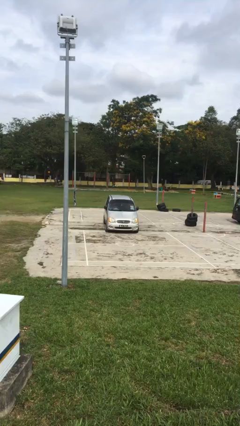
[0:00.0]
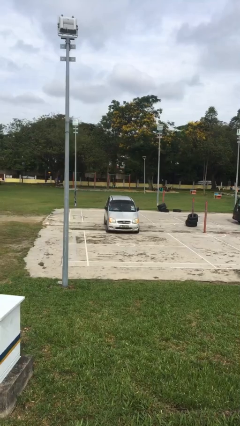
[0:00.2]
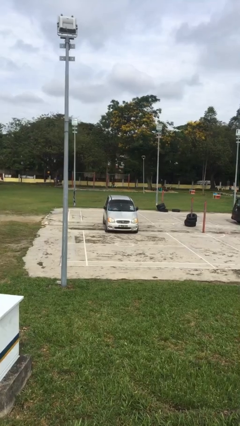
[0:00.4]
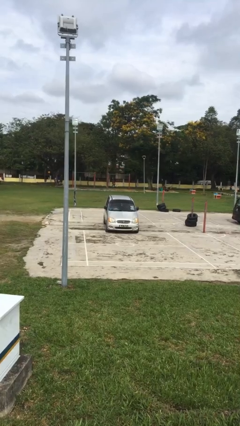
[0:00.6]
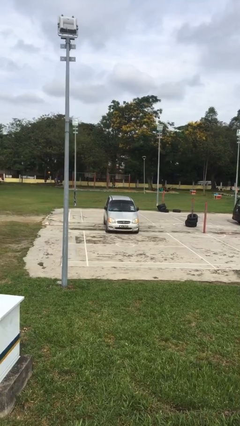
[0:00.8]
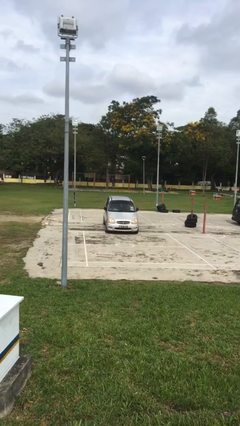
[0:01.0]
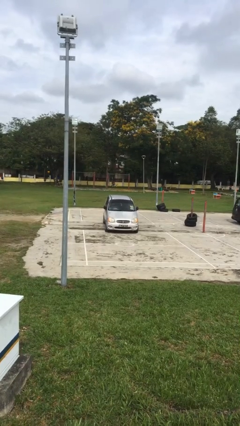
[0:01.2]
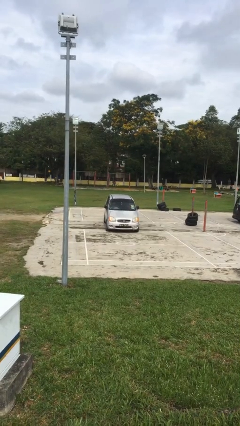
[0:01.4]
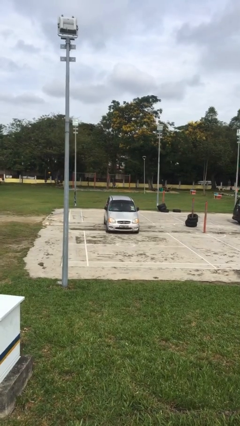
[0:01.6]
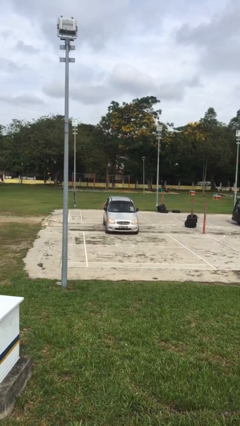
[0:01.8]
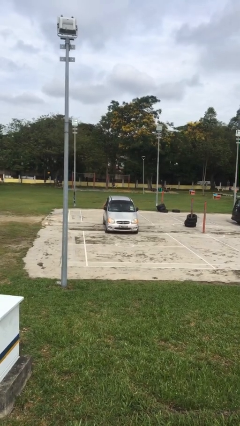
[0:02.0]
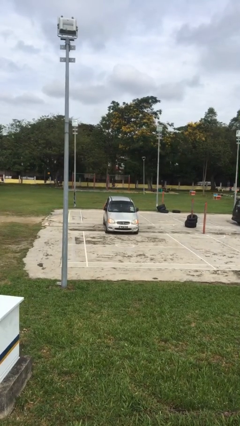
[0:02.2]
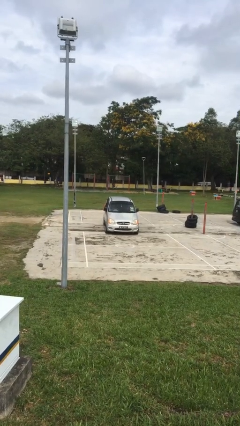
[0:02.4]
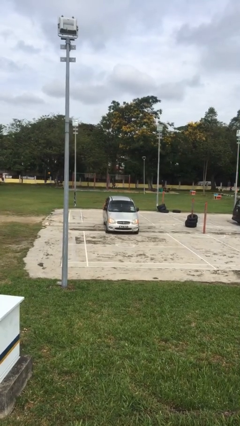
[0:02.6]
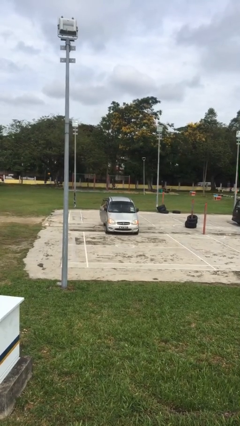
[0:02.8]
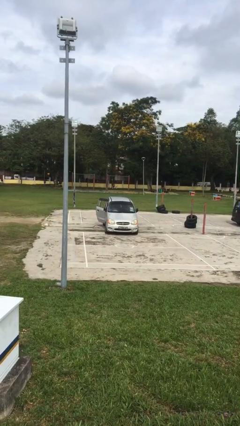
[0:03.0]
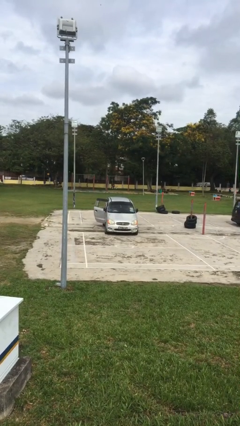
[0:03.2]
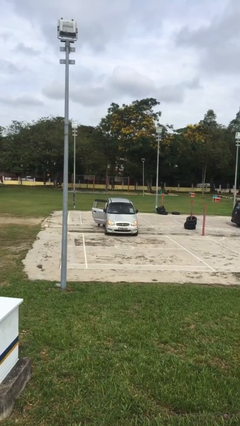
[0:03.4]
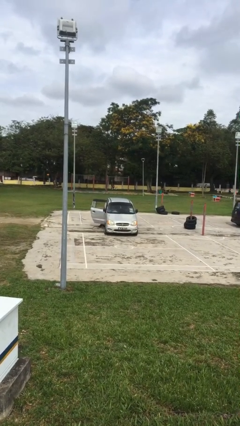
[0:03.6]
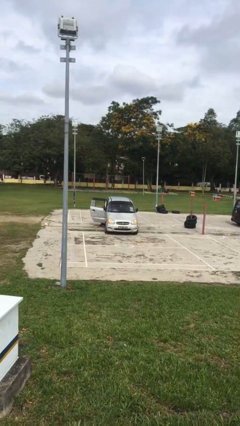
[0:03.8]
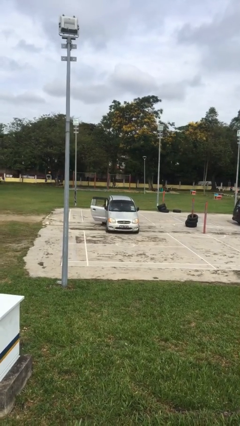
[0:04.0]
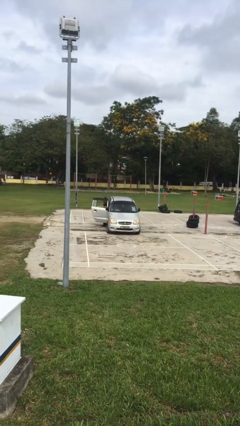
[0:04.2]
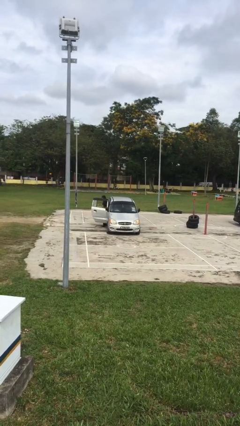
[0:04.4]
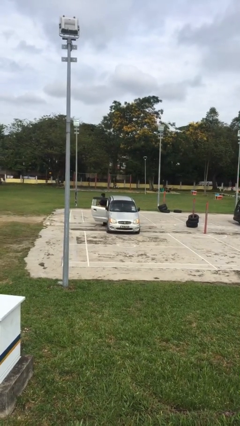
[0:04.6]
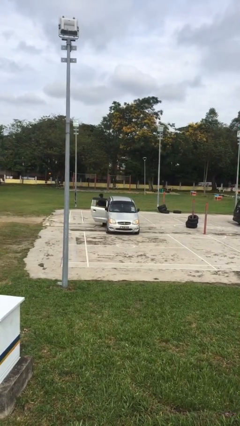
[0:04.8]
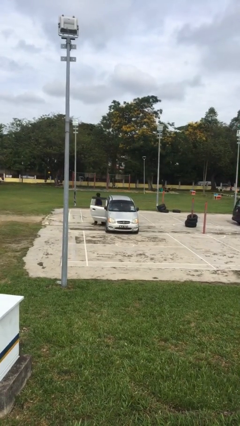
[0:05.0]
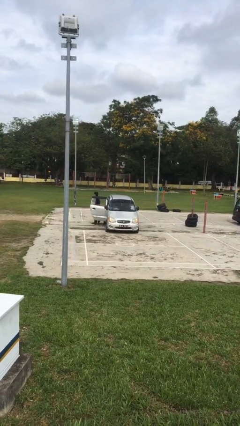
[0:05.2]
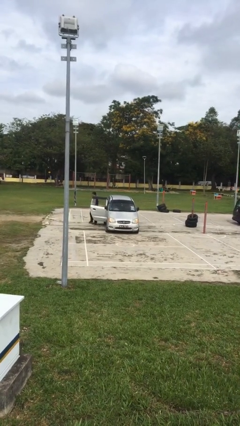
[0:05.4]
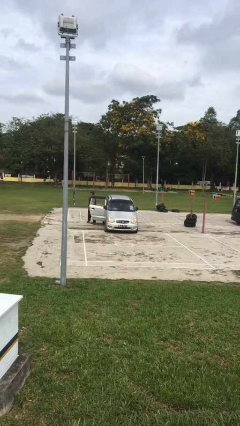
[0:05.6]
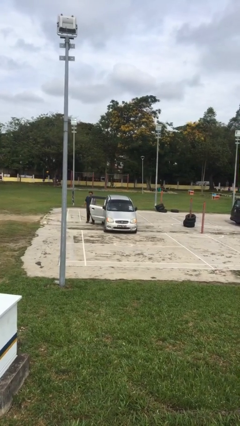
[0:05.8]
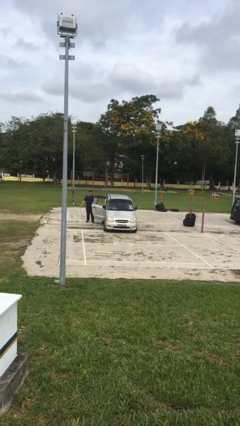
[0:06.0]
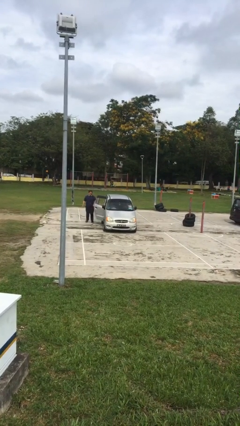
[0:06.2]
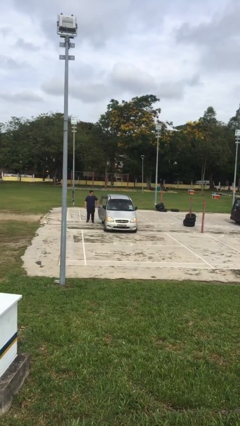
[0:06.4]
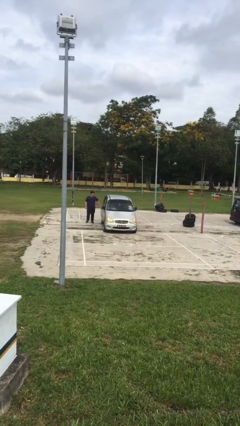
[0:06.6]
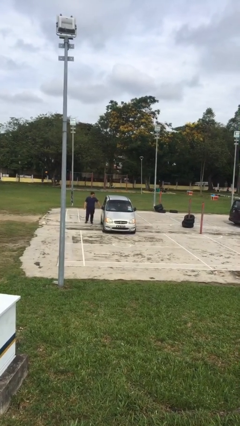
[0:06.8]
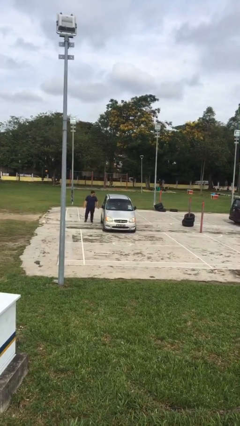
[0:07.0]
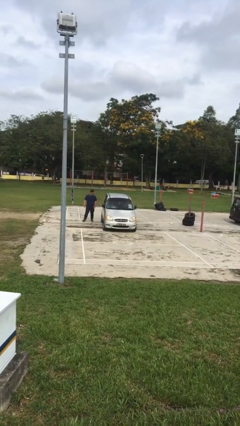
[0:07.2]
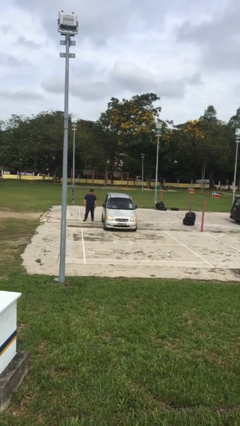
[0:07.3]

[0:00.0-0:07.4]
car drops off person

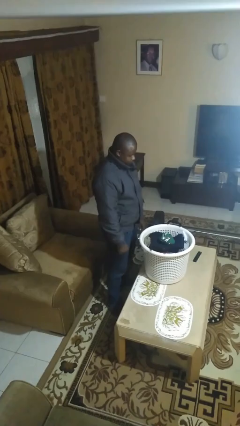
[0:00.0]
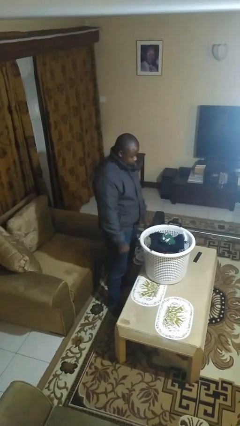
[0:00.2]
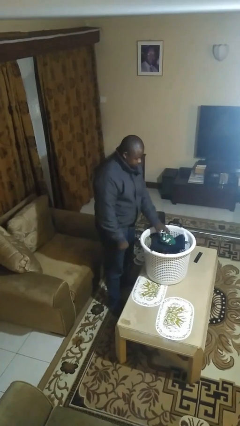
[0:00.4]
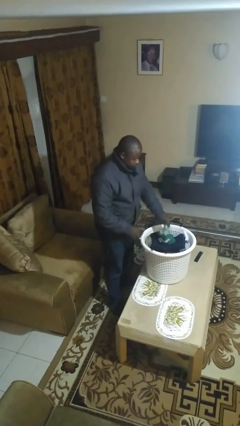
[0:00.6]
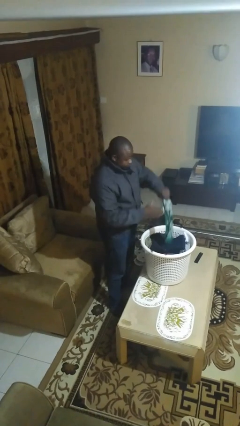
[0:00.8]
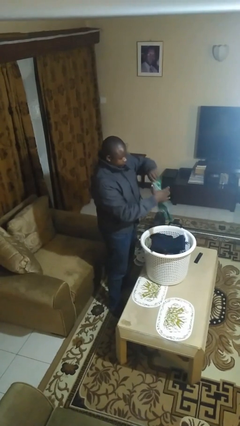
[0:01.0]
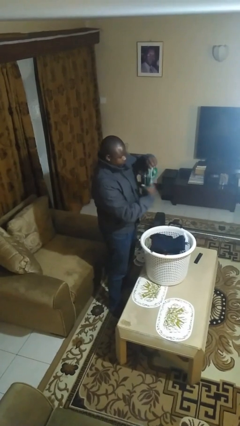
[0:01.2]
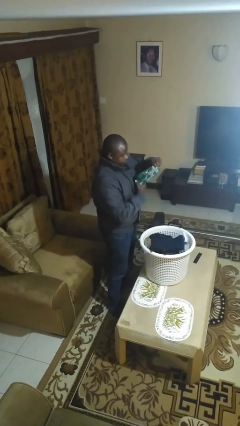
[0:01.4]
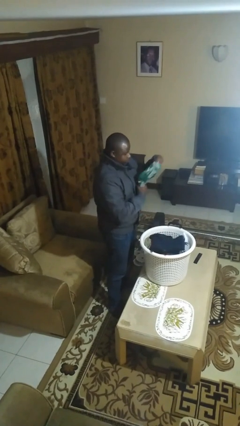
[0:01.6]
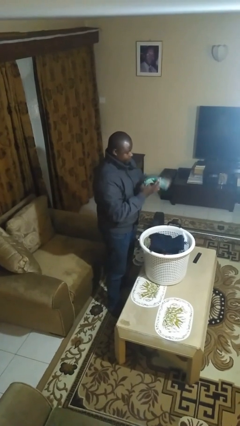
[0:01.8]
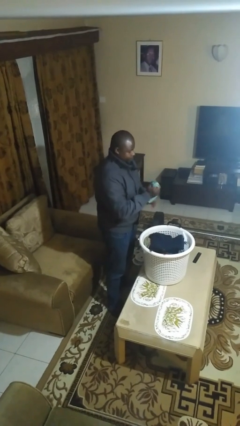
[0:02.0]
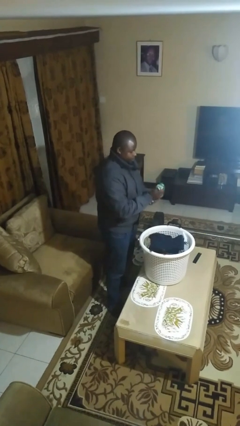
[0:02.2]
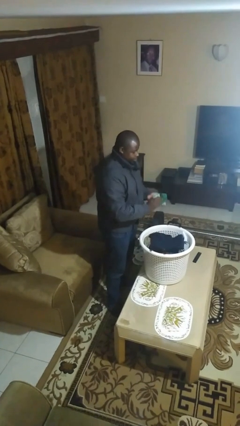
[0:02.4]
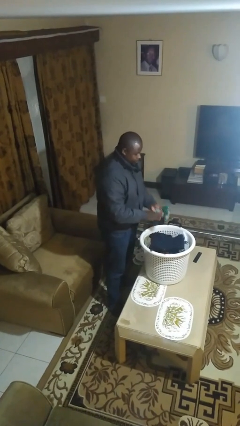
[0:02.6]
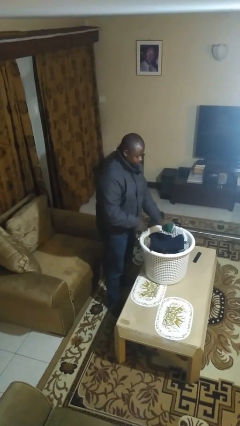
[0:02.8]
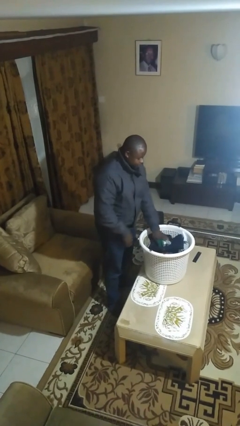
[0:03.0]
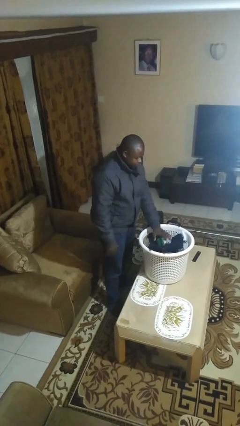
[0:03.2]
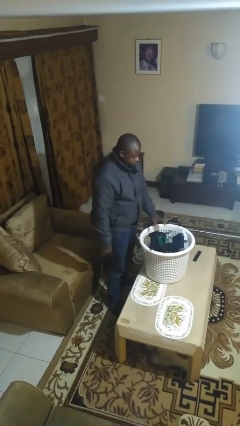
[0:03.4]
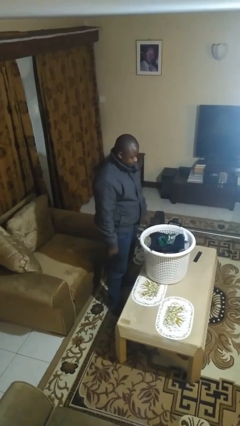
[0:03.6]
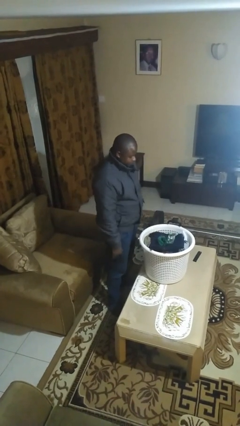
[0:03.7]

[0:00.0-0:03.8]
person folds socks

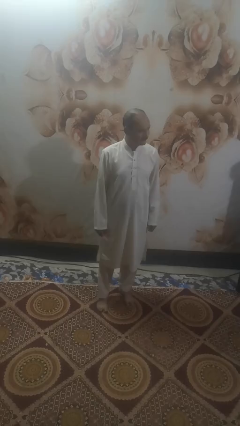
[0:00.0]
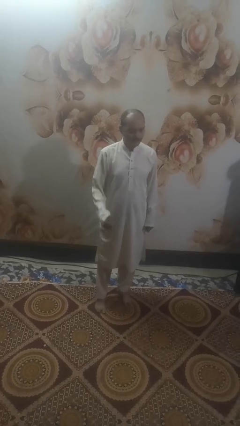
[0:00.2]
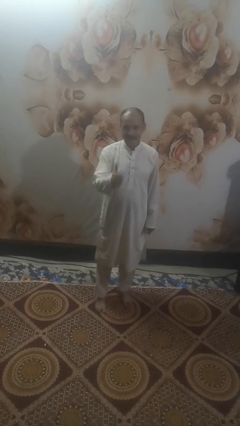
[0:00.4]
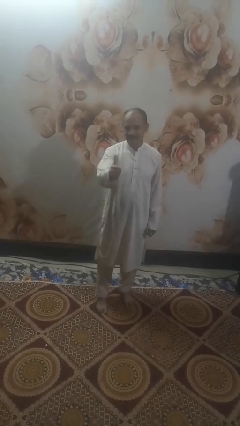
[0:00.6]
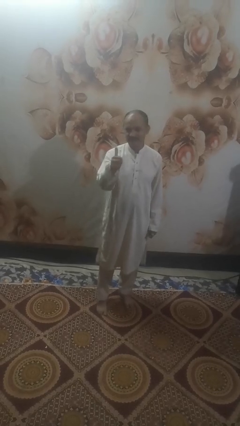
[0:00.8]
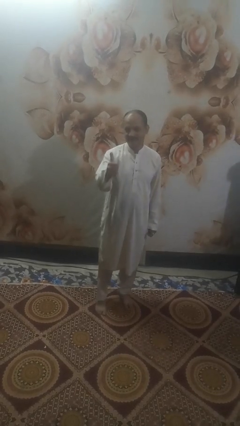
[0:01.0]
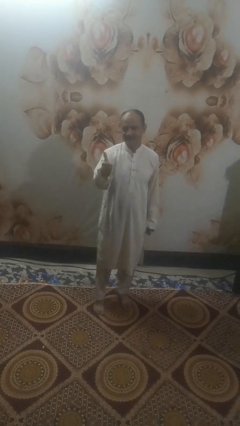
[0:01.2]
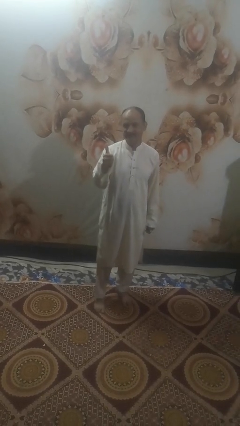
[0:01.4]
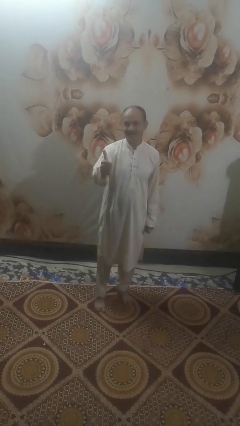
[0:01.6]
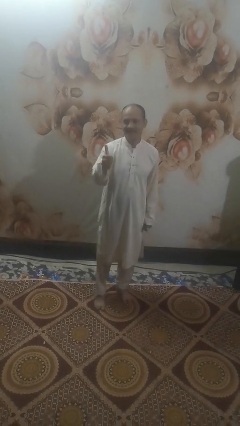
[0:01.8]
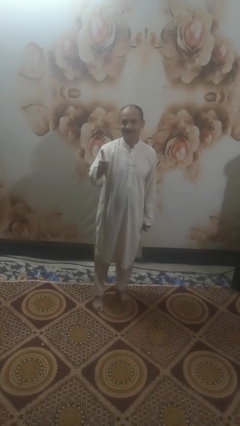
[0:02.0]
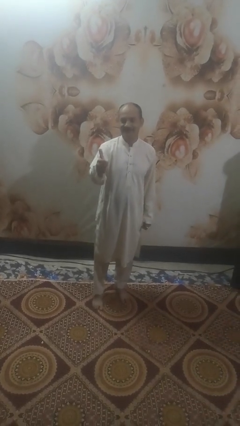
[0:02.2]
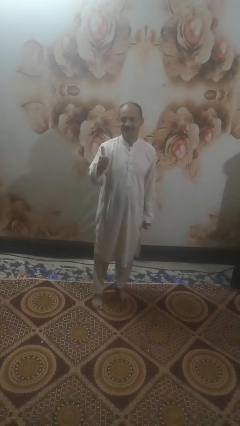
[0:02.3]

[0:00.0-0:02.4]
person gestures thumbs up

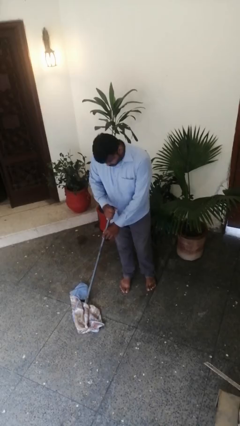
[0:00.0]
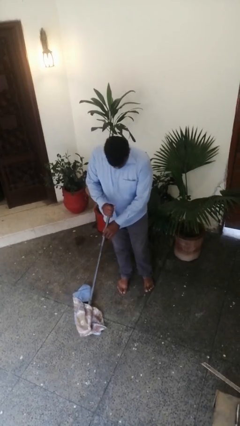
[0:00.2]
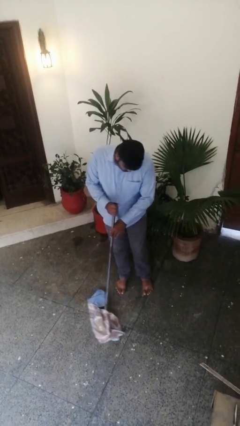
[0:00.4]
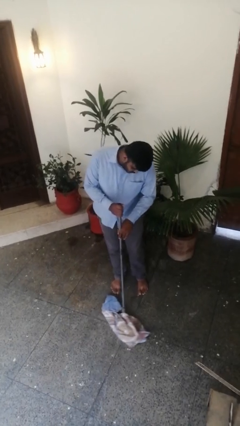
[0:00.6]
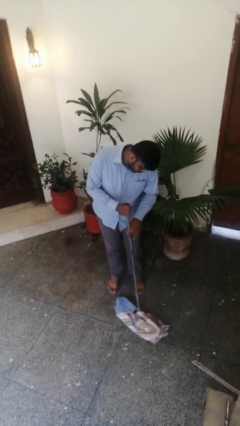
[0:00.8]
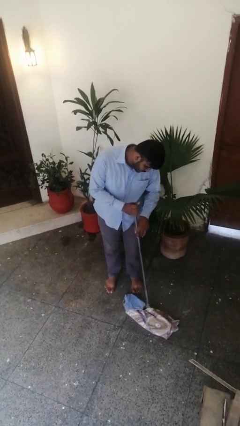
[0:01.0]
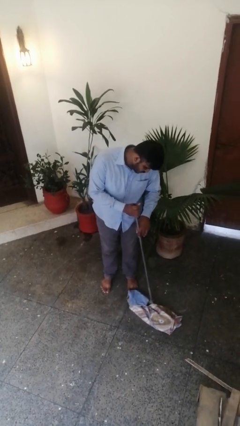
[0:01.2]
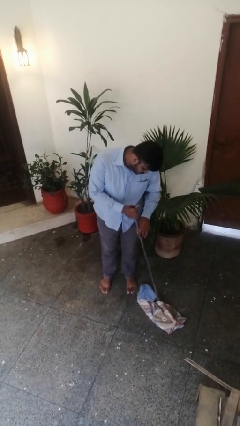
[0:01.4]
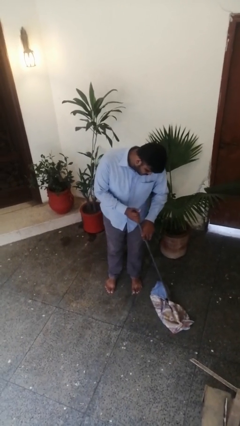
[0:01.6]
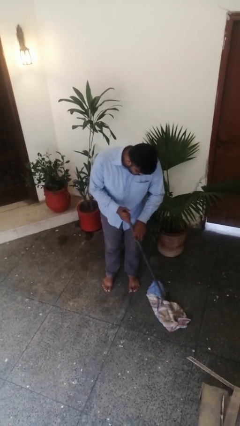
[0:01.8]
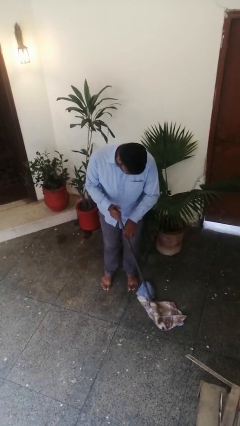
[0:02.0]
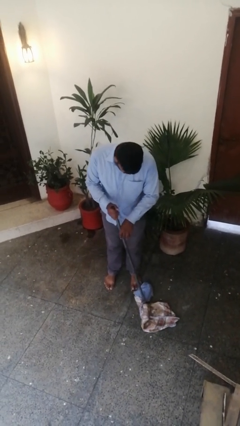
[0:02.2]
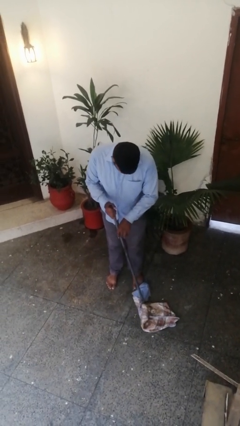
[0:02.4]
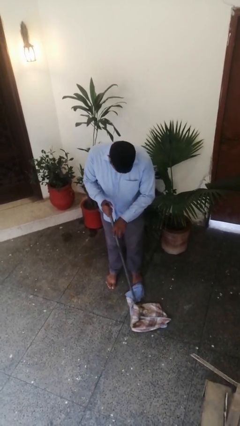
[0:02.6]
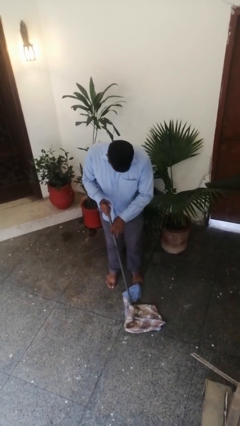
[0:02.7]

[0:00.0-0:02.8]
person sweeps floor

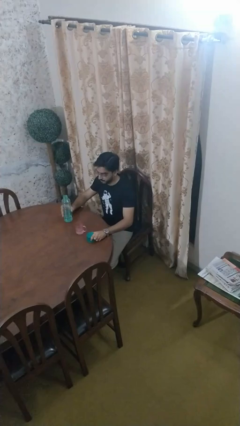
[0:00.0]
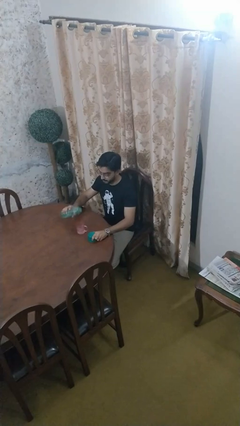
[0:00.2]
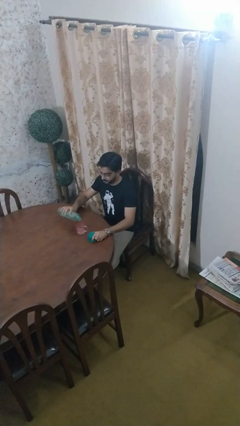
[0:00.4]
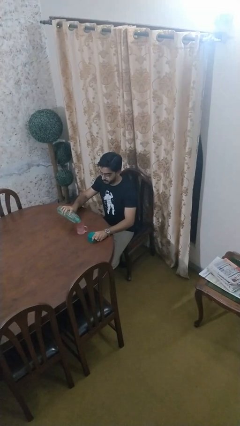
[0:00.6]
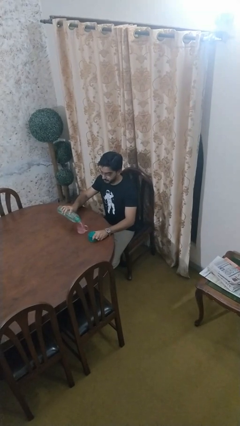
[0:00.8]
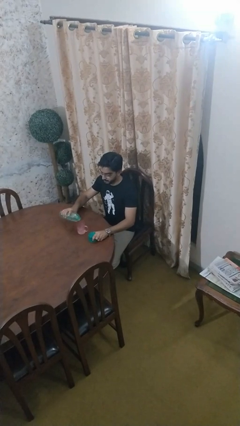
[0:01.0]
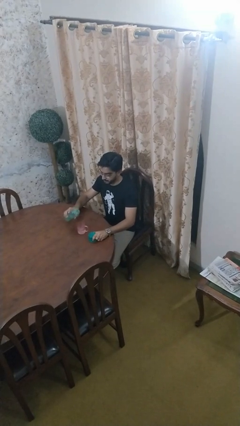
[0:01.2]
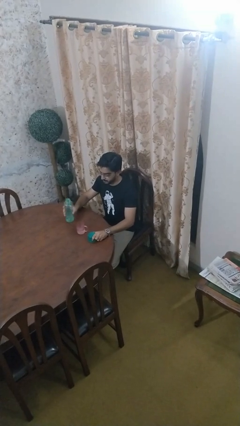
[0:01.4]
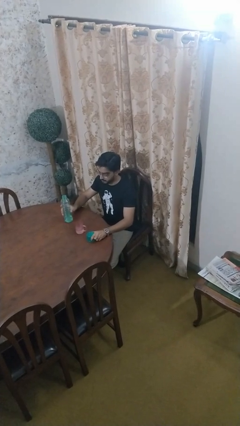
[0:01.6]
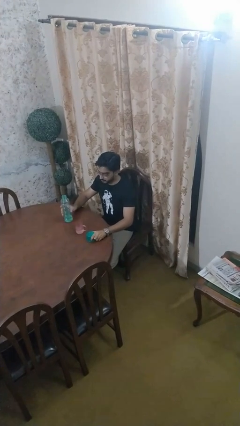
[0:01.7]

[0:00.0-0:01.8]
person pours liquid into cup
